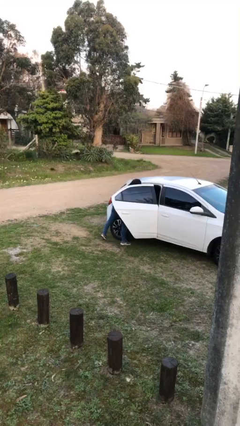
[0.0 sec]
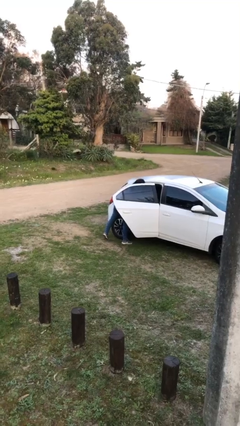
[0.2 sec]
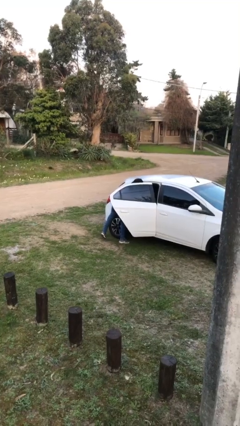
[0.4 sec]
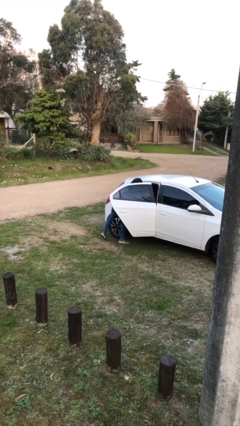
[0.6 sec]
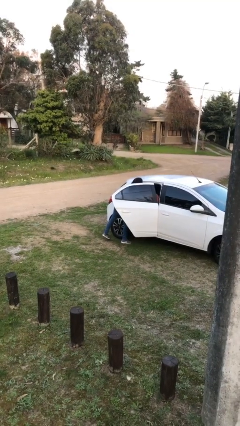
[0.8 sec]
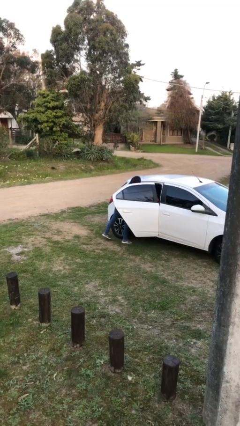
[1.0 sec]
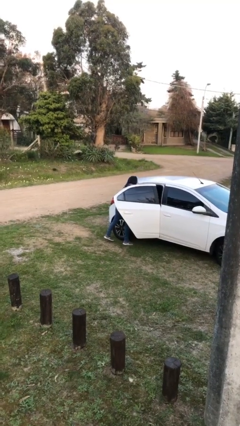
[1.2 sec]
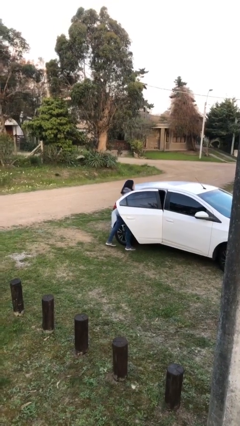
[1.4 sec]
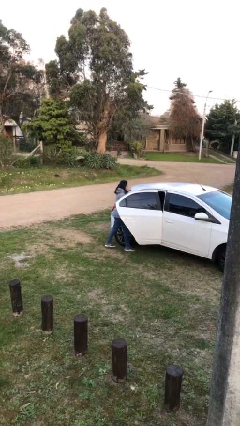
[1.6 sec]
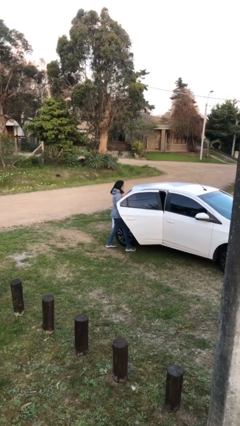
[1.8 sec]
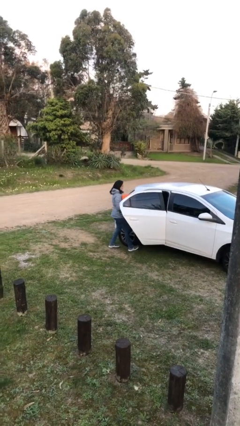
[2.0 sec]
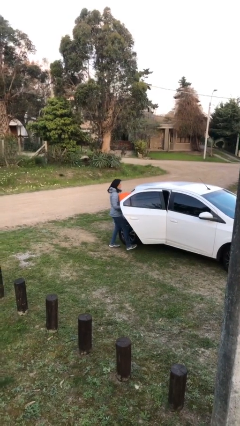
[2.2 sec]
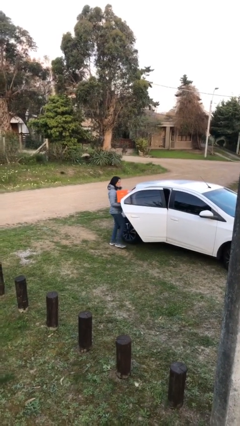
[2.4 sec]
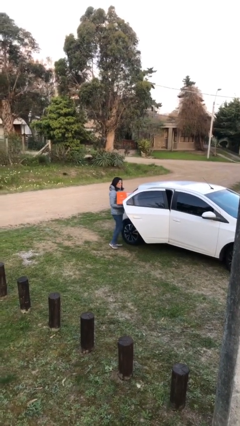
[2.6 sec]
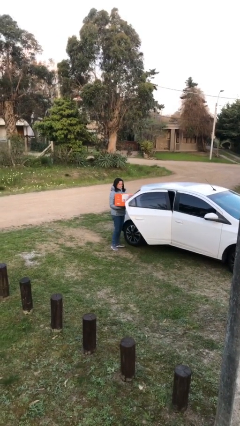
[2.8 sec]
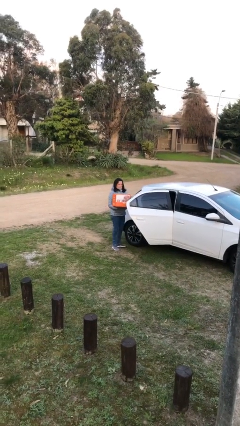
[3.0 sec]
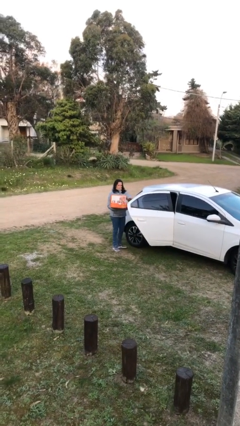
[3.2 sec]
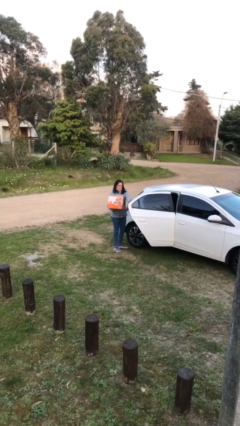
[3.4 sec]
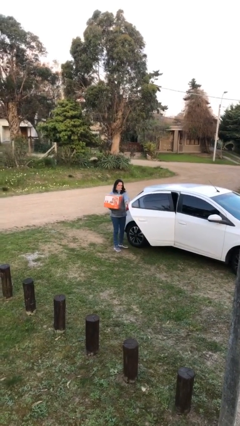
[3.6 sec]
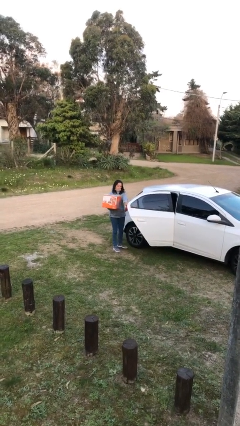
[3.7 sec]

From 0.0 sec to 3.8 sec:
person unloads car

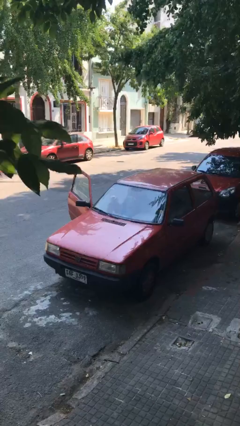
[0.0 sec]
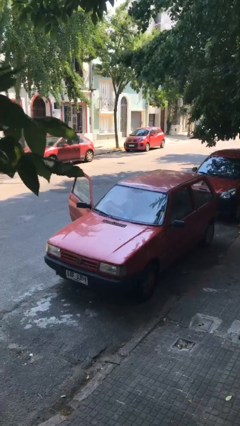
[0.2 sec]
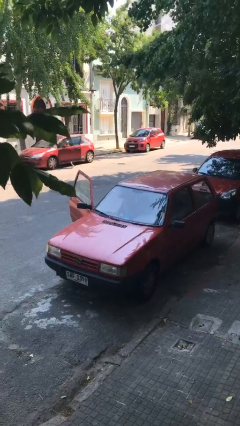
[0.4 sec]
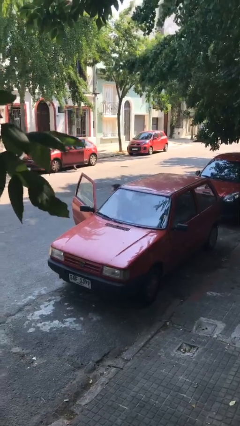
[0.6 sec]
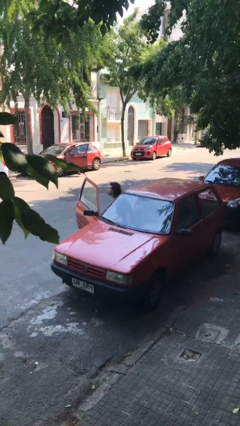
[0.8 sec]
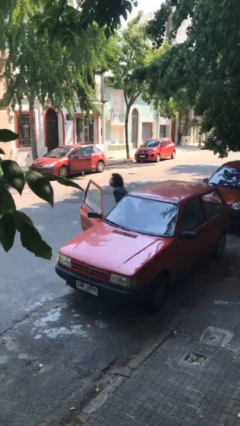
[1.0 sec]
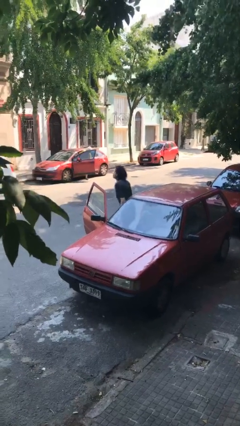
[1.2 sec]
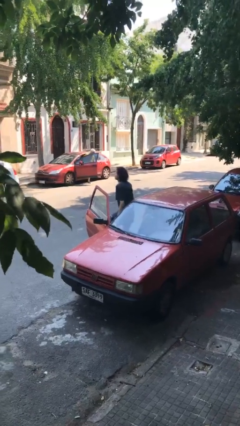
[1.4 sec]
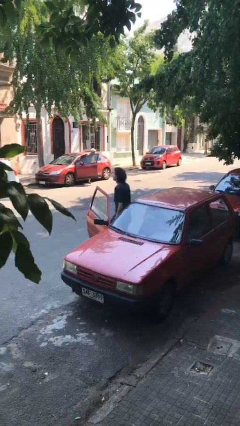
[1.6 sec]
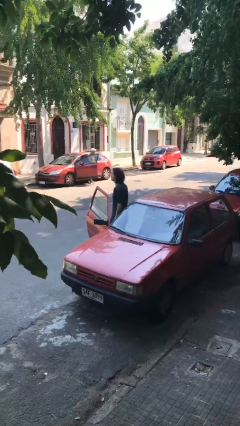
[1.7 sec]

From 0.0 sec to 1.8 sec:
person exits car

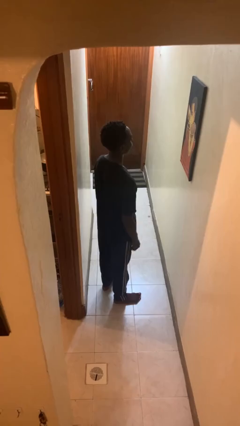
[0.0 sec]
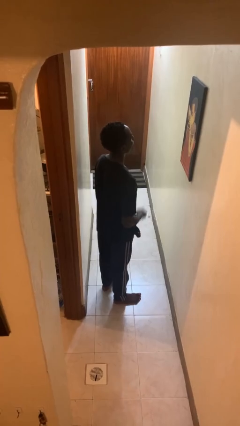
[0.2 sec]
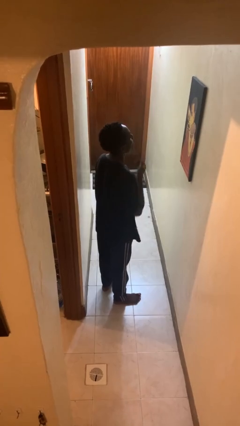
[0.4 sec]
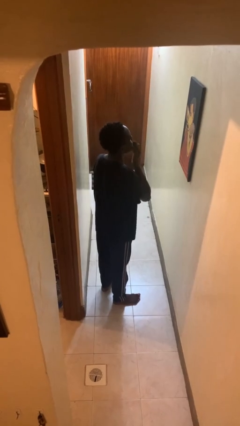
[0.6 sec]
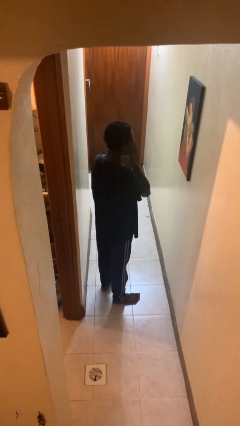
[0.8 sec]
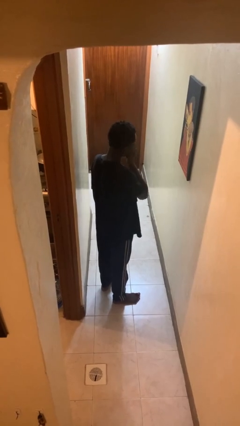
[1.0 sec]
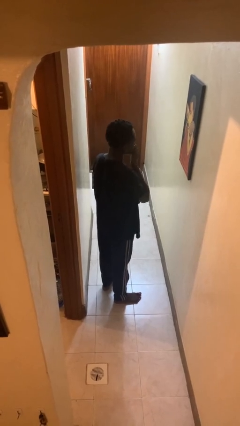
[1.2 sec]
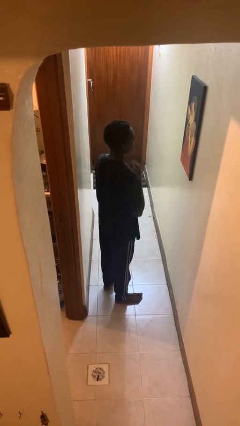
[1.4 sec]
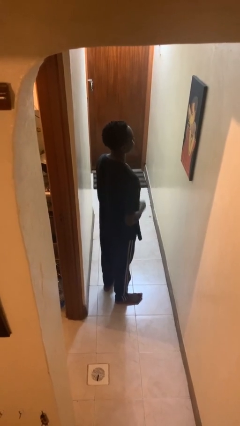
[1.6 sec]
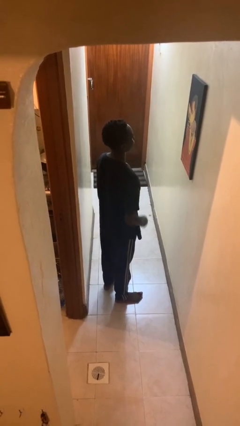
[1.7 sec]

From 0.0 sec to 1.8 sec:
person sneezes into hand

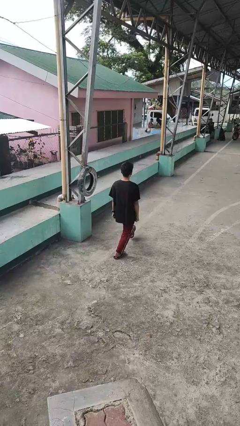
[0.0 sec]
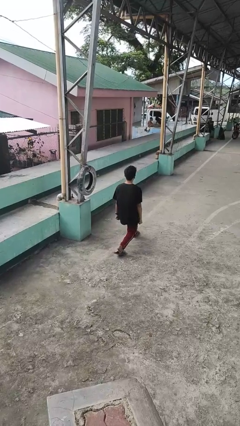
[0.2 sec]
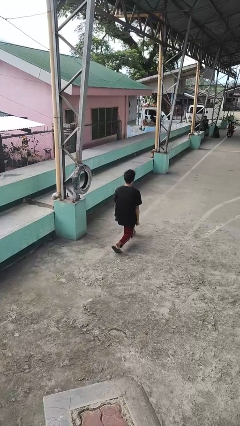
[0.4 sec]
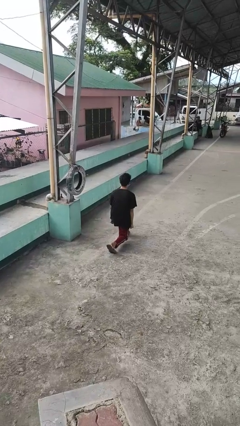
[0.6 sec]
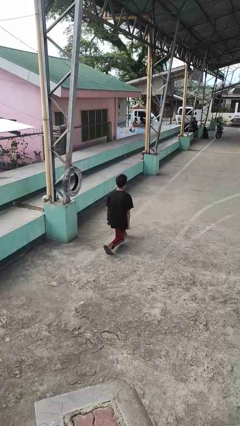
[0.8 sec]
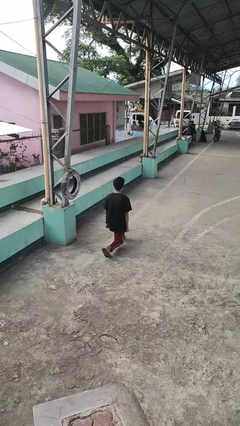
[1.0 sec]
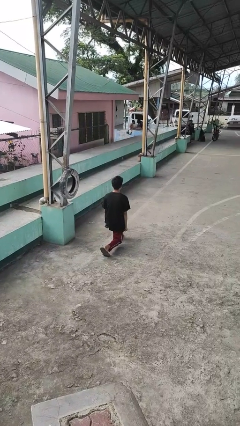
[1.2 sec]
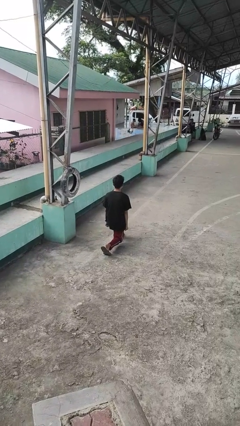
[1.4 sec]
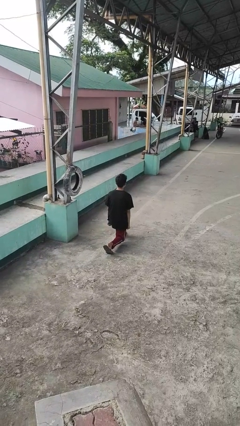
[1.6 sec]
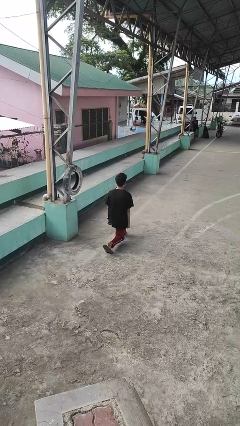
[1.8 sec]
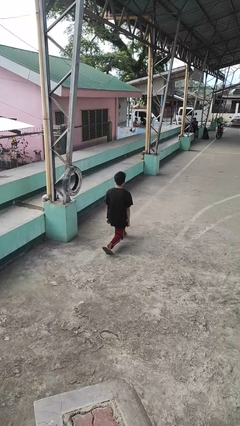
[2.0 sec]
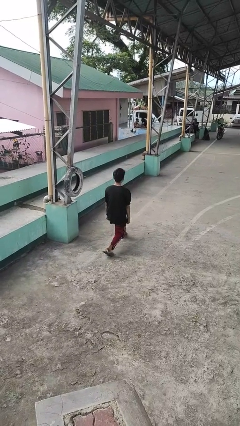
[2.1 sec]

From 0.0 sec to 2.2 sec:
person exercises with lunges

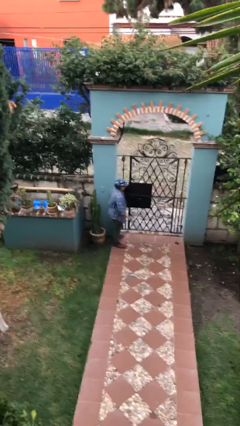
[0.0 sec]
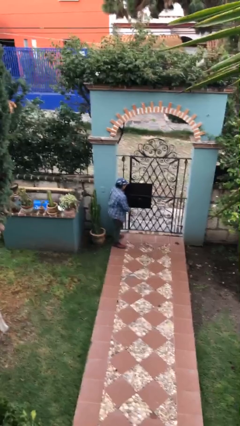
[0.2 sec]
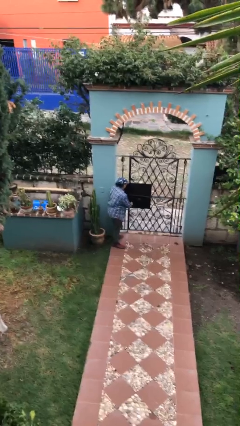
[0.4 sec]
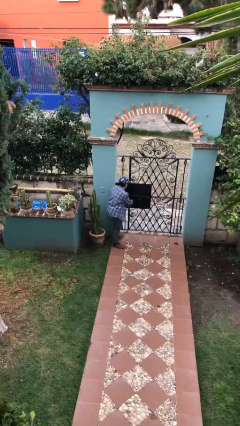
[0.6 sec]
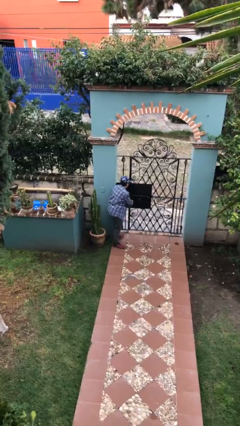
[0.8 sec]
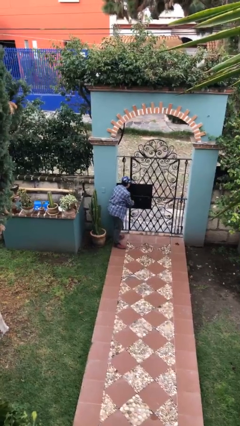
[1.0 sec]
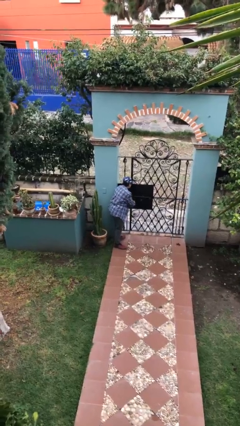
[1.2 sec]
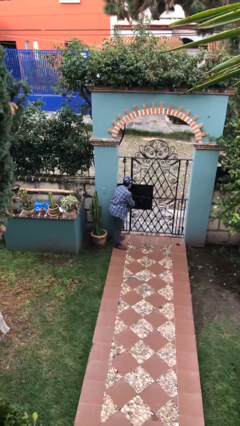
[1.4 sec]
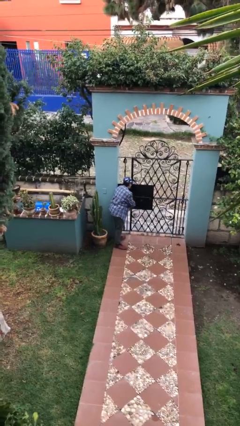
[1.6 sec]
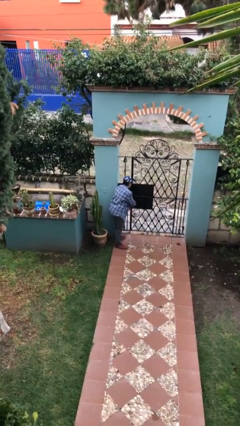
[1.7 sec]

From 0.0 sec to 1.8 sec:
person unlocks door with keys

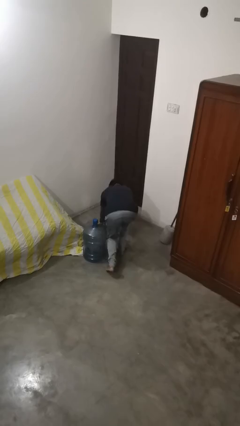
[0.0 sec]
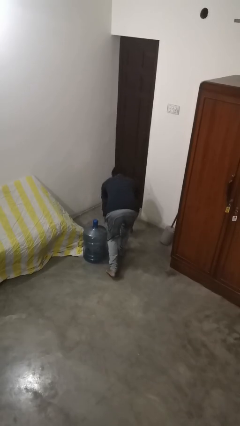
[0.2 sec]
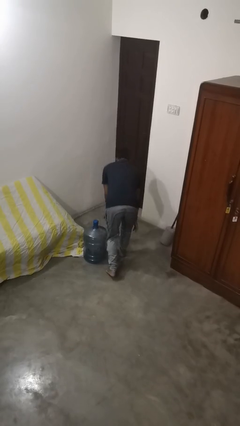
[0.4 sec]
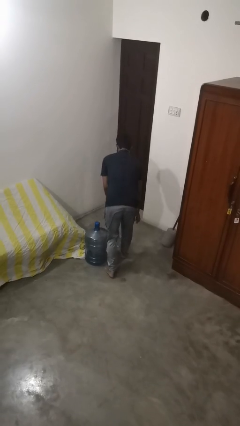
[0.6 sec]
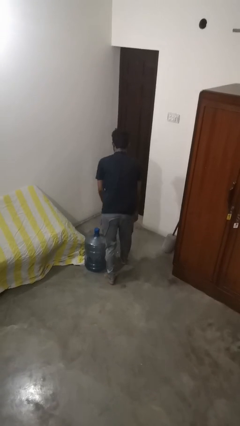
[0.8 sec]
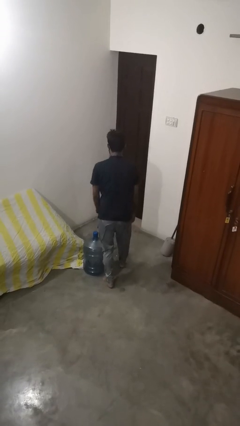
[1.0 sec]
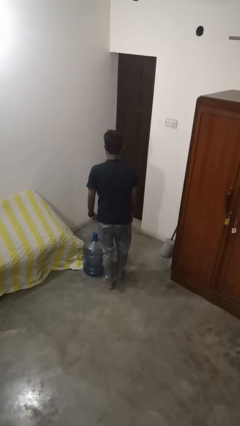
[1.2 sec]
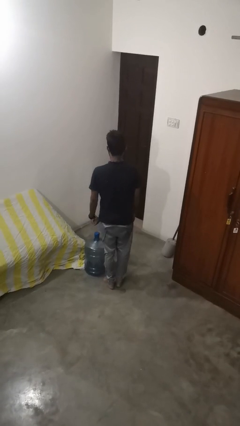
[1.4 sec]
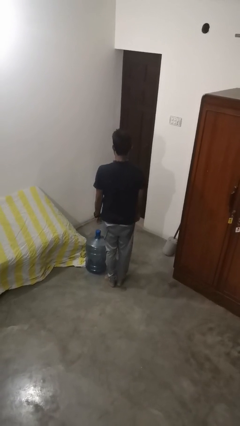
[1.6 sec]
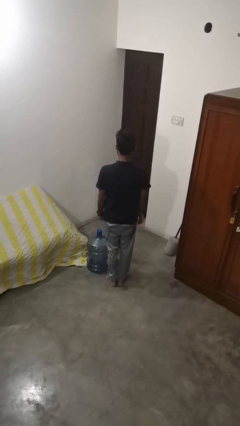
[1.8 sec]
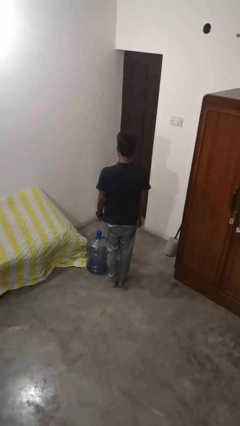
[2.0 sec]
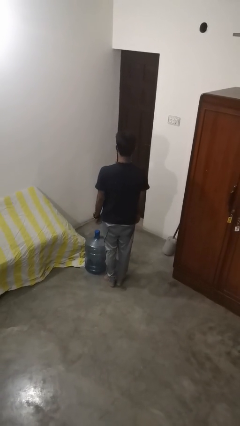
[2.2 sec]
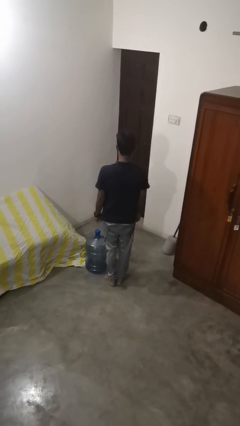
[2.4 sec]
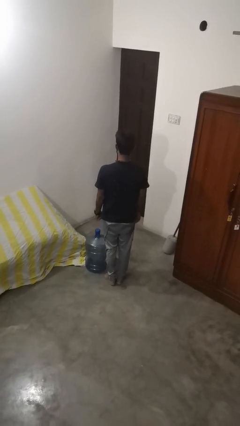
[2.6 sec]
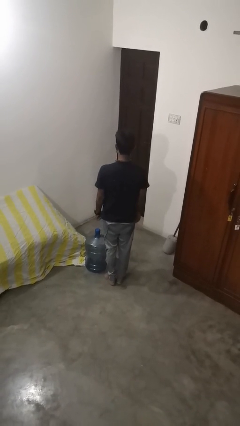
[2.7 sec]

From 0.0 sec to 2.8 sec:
person stands up from floor

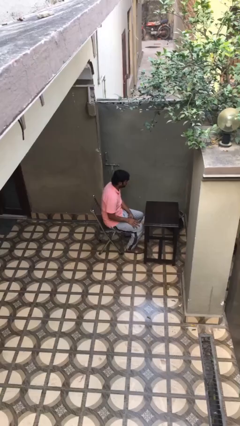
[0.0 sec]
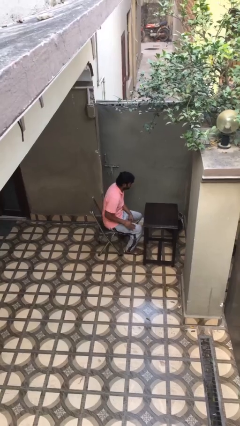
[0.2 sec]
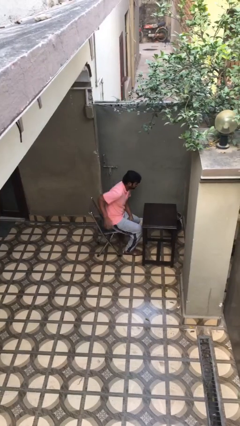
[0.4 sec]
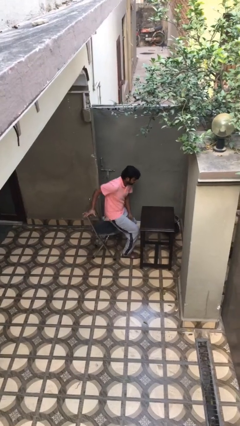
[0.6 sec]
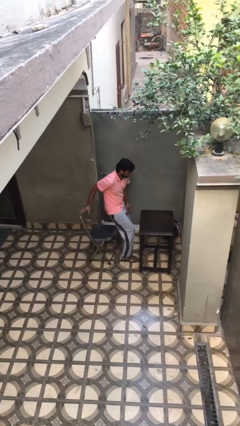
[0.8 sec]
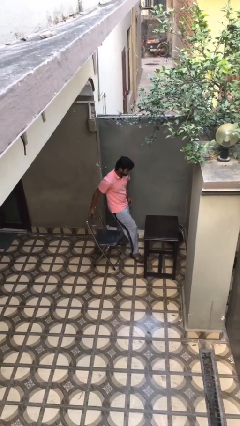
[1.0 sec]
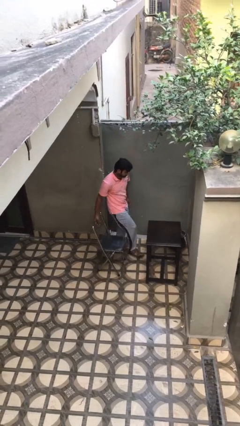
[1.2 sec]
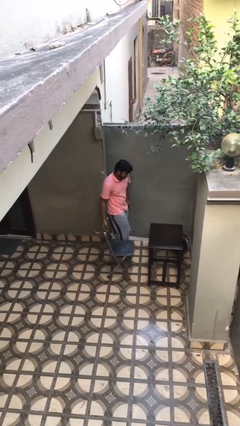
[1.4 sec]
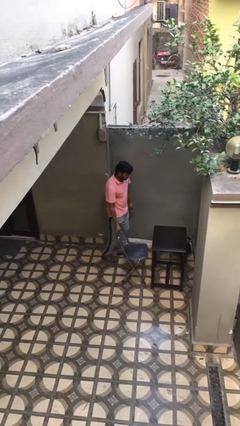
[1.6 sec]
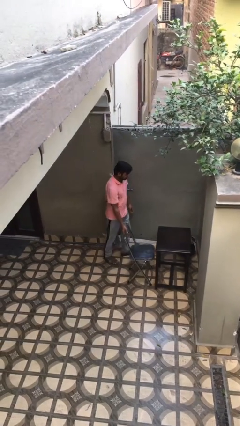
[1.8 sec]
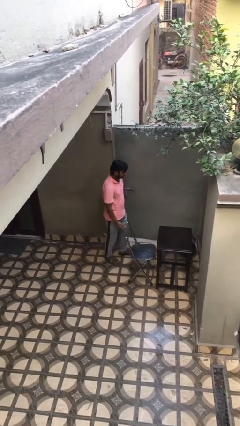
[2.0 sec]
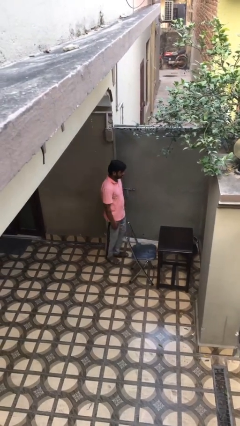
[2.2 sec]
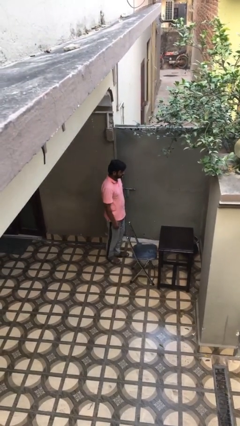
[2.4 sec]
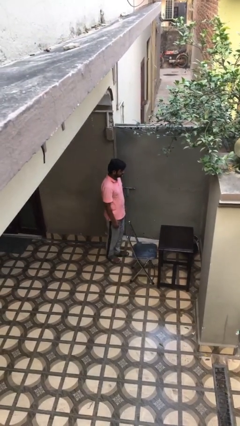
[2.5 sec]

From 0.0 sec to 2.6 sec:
person stands up
